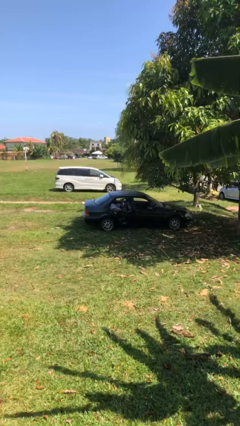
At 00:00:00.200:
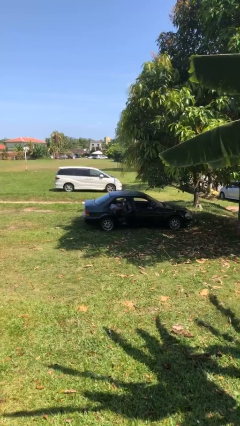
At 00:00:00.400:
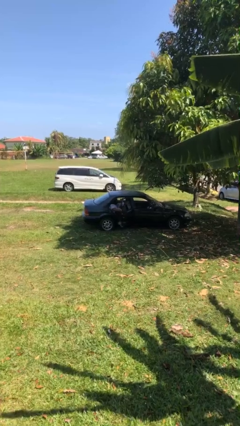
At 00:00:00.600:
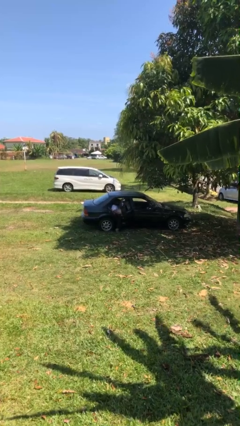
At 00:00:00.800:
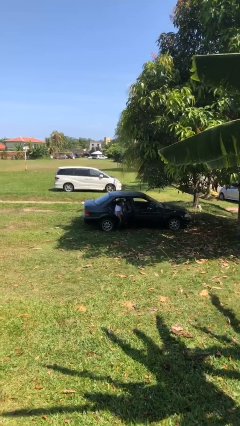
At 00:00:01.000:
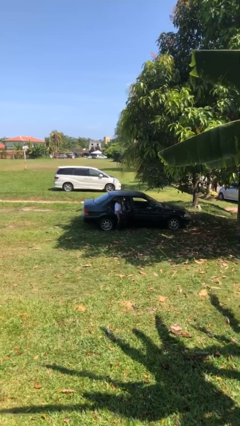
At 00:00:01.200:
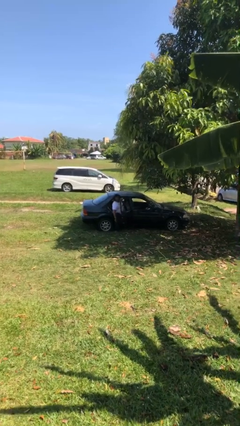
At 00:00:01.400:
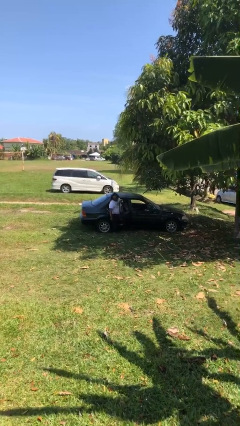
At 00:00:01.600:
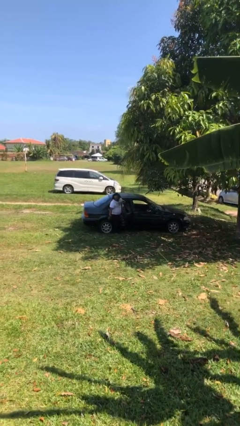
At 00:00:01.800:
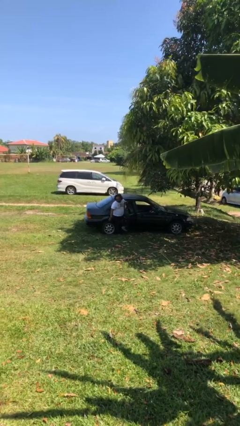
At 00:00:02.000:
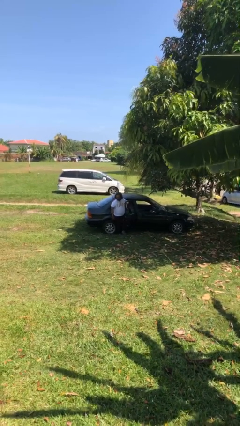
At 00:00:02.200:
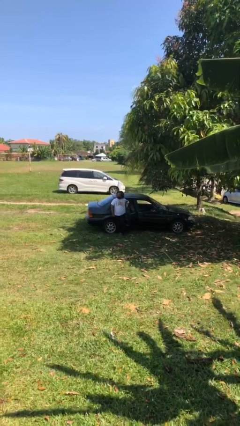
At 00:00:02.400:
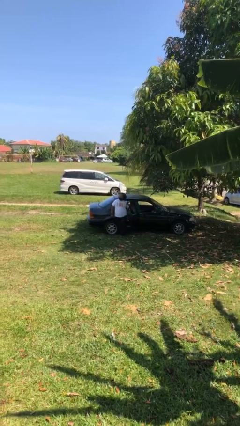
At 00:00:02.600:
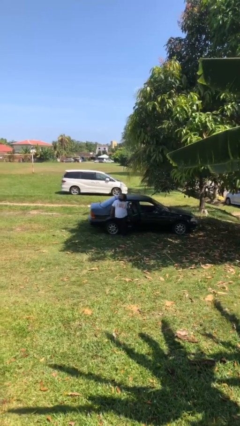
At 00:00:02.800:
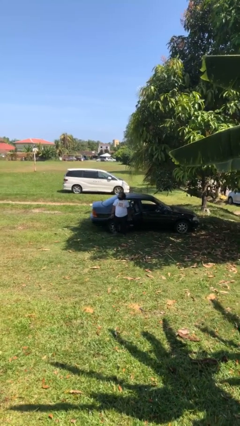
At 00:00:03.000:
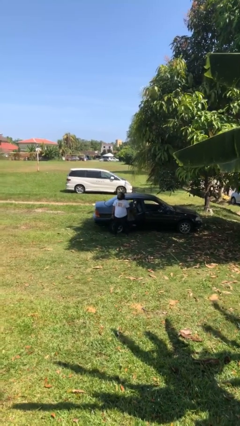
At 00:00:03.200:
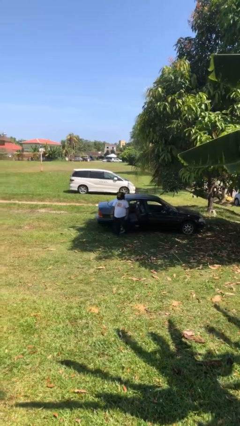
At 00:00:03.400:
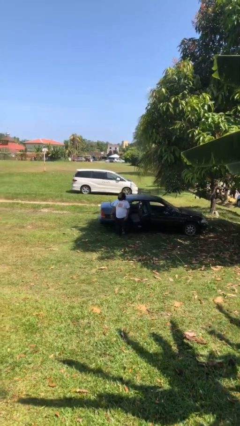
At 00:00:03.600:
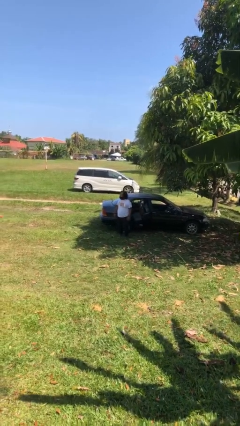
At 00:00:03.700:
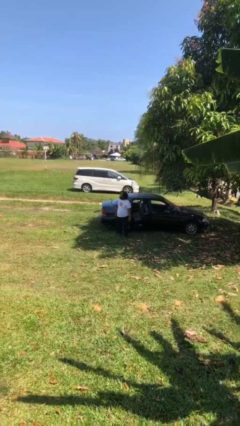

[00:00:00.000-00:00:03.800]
person exits car

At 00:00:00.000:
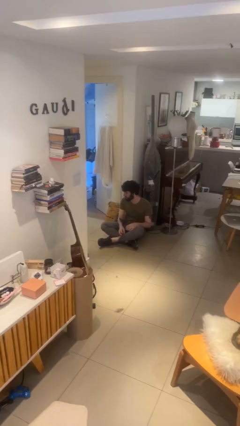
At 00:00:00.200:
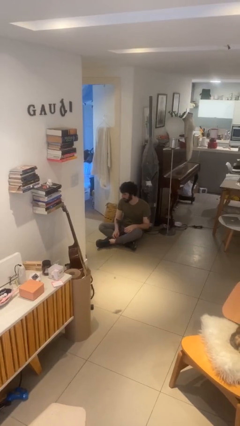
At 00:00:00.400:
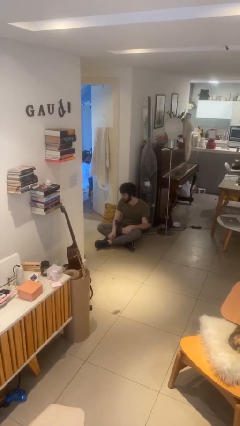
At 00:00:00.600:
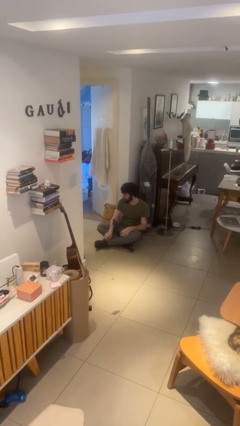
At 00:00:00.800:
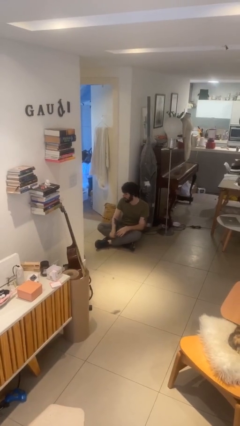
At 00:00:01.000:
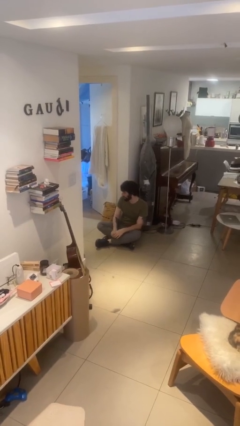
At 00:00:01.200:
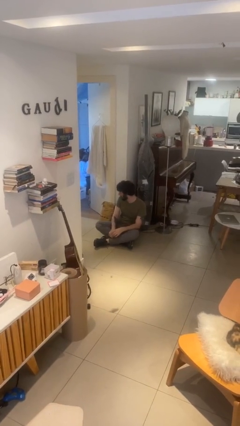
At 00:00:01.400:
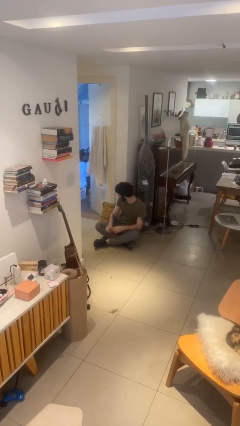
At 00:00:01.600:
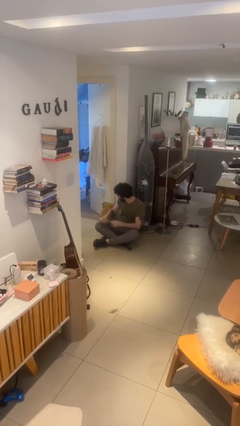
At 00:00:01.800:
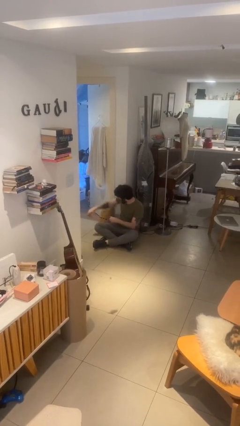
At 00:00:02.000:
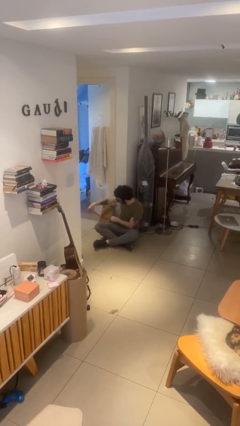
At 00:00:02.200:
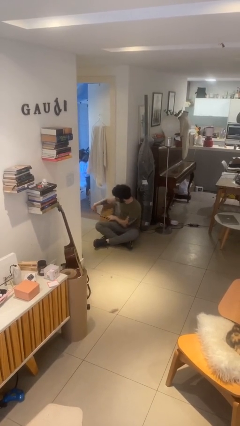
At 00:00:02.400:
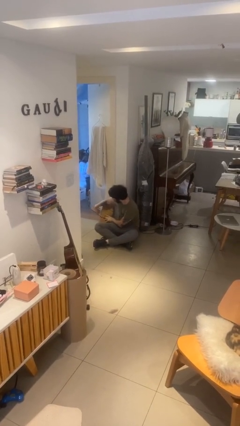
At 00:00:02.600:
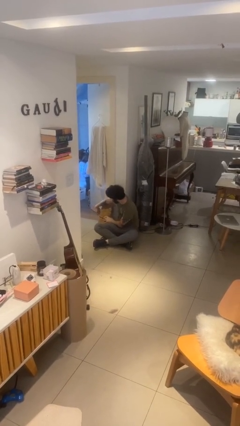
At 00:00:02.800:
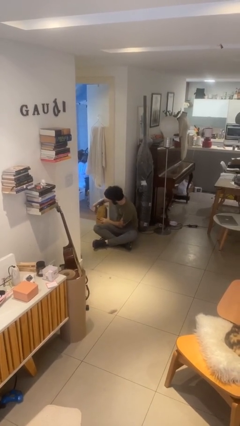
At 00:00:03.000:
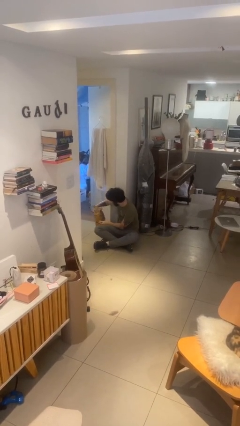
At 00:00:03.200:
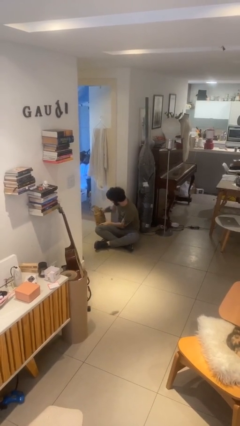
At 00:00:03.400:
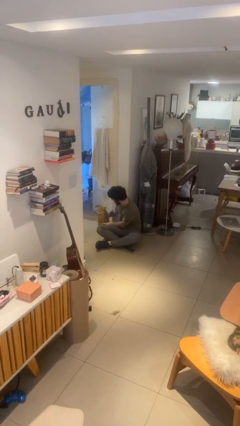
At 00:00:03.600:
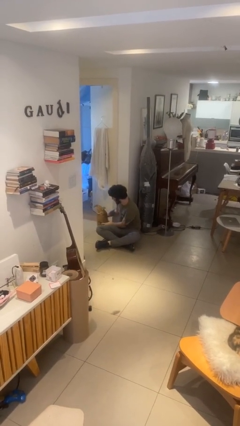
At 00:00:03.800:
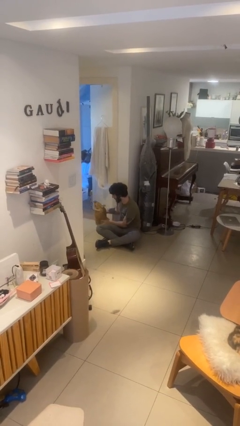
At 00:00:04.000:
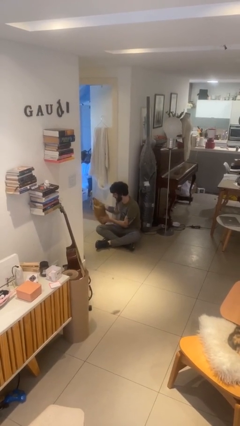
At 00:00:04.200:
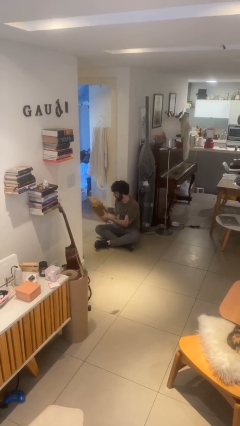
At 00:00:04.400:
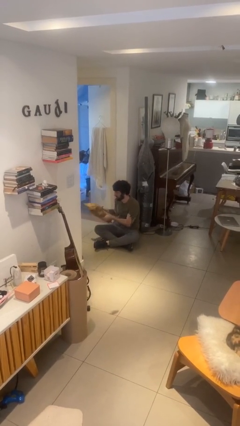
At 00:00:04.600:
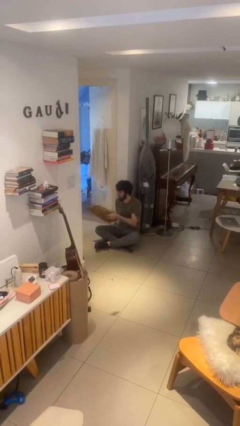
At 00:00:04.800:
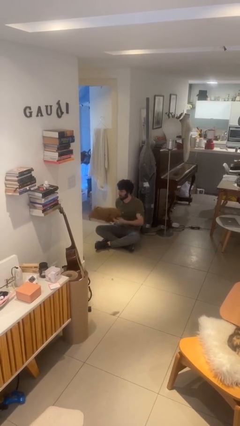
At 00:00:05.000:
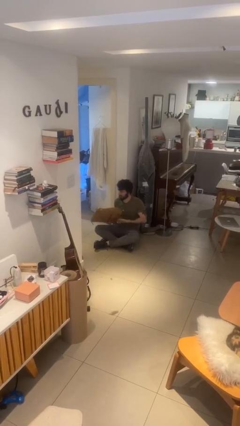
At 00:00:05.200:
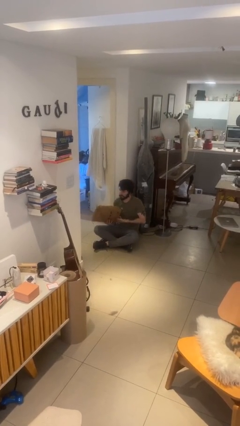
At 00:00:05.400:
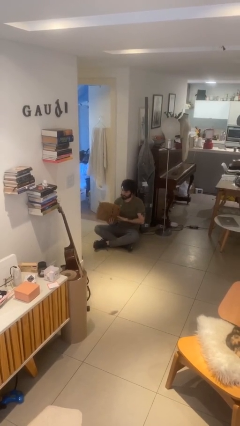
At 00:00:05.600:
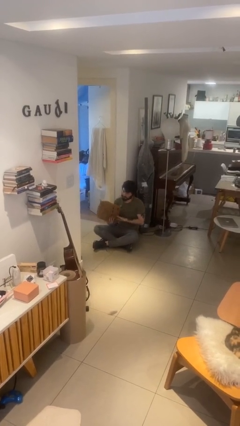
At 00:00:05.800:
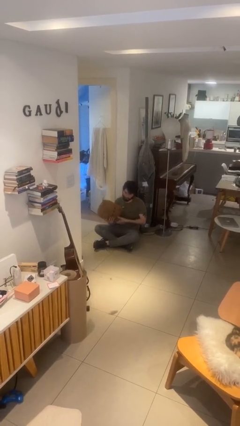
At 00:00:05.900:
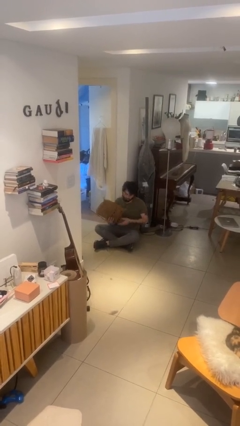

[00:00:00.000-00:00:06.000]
person picks up object from floor

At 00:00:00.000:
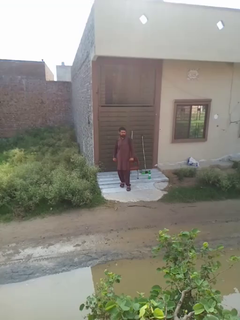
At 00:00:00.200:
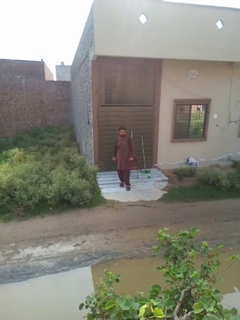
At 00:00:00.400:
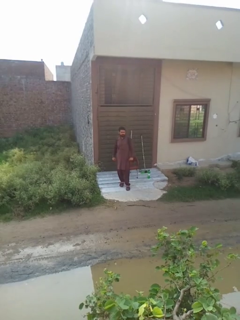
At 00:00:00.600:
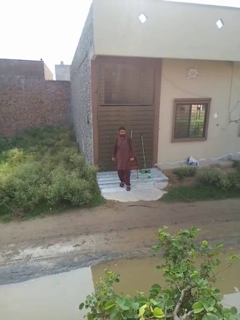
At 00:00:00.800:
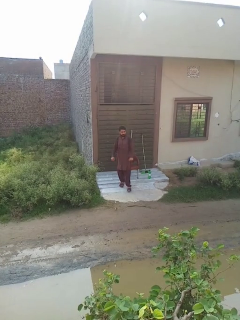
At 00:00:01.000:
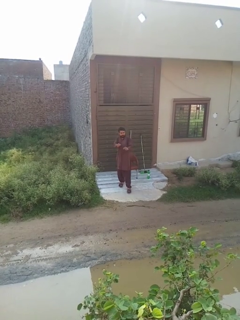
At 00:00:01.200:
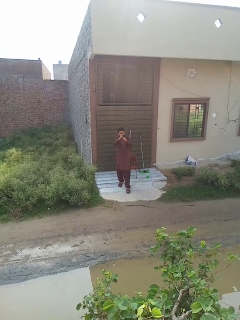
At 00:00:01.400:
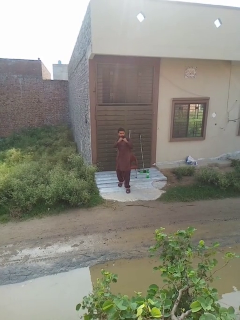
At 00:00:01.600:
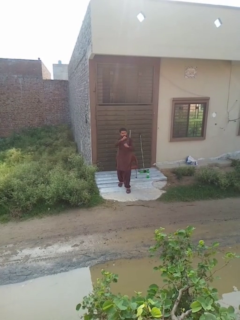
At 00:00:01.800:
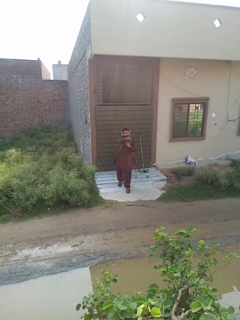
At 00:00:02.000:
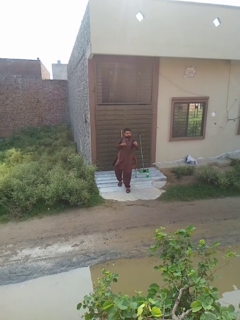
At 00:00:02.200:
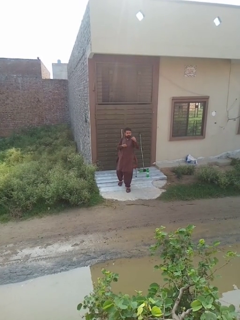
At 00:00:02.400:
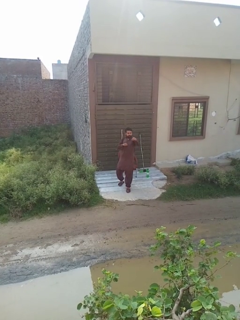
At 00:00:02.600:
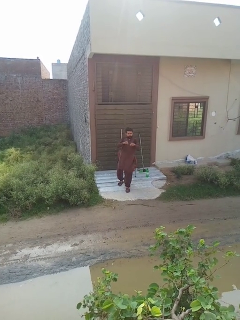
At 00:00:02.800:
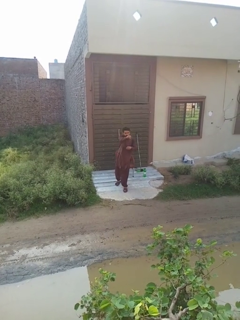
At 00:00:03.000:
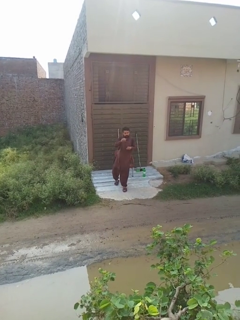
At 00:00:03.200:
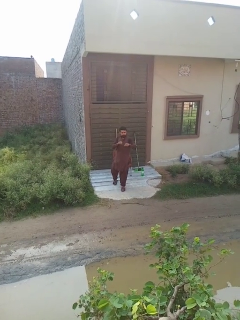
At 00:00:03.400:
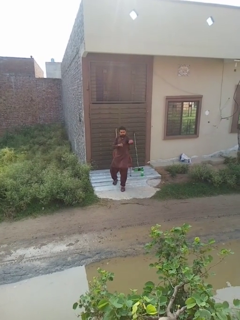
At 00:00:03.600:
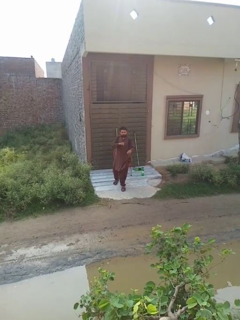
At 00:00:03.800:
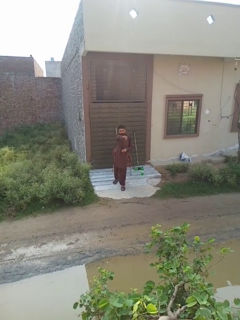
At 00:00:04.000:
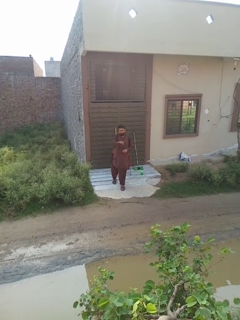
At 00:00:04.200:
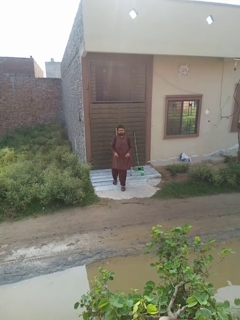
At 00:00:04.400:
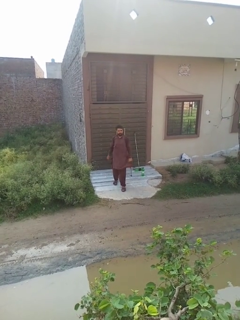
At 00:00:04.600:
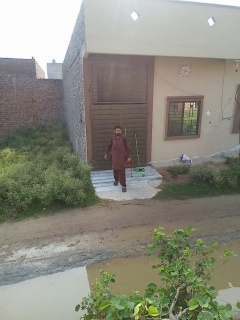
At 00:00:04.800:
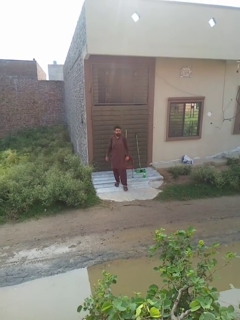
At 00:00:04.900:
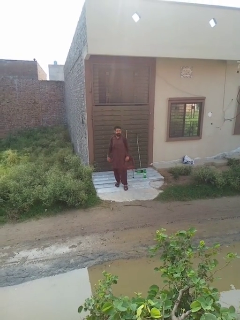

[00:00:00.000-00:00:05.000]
person punches

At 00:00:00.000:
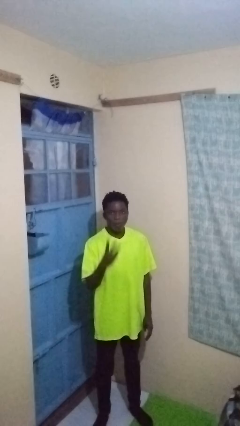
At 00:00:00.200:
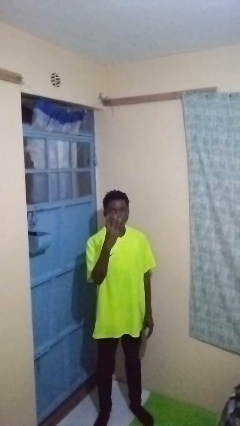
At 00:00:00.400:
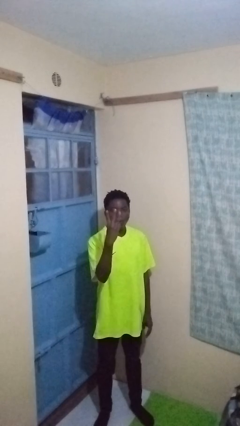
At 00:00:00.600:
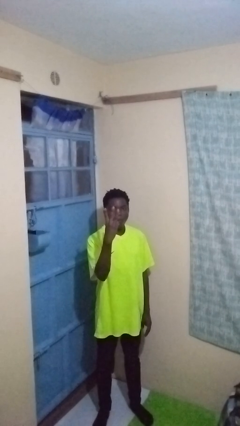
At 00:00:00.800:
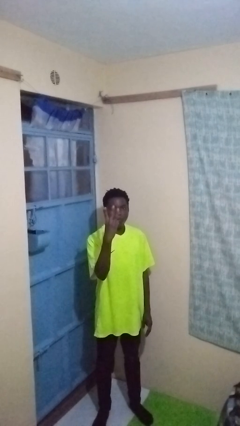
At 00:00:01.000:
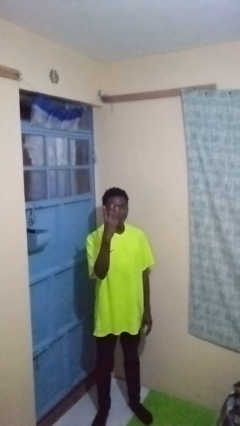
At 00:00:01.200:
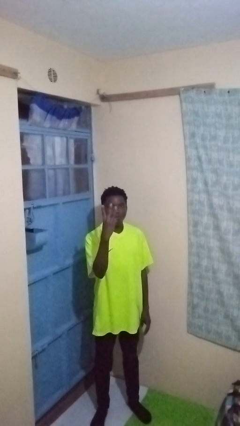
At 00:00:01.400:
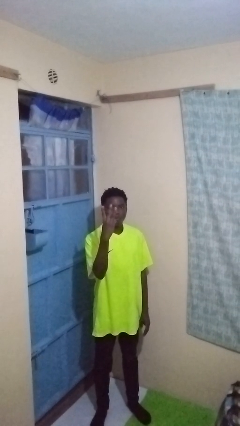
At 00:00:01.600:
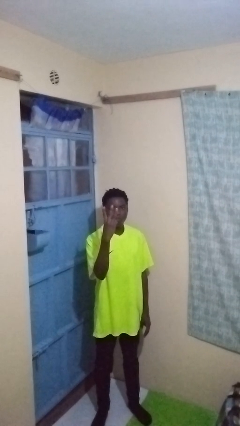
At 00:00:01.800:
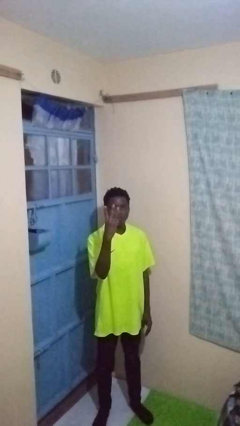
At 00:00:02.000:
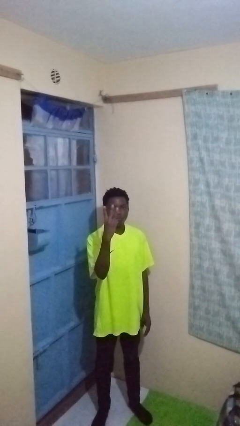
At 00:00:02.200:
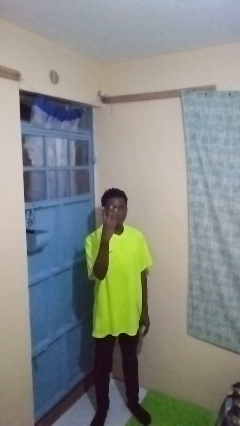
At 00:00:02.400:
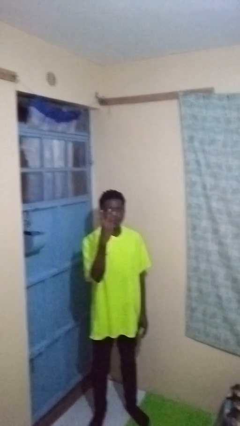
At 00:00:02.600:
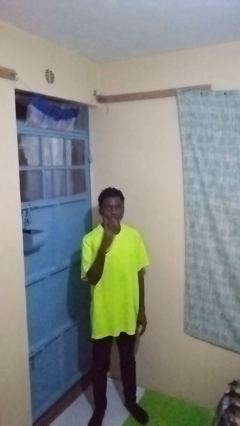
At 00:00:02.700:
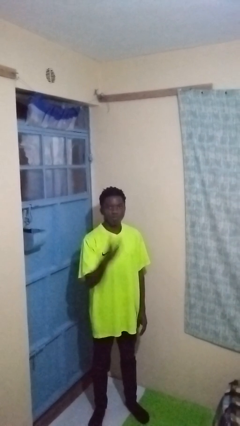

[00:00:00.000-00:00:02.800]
person gestures number three

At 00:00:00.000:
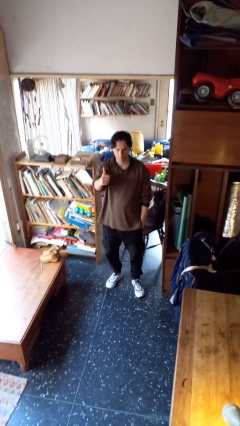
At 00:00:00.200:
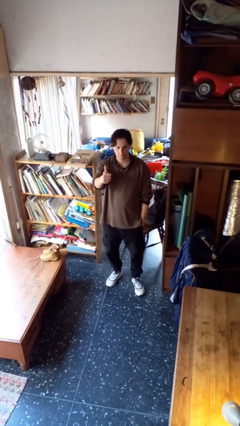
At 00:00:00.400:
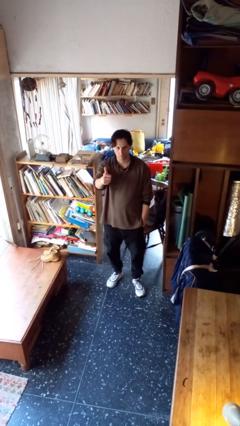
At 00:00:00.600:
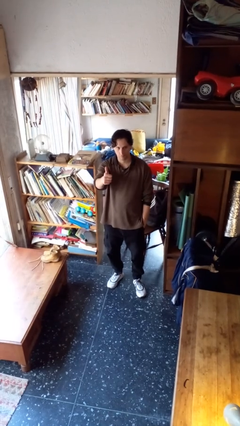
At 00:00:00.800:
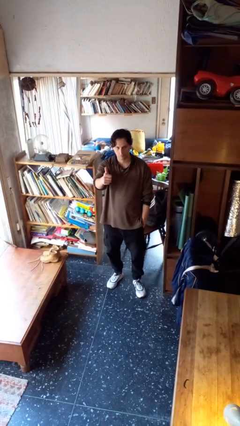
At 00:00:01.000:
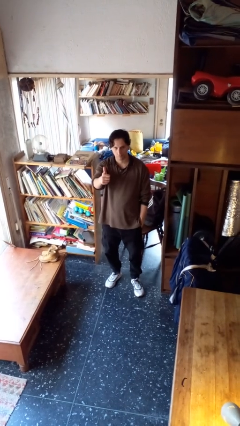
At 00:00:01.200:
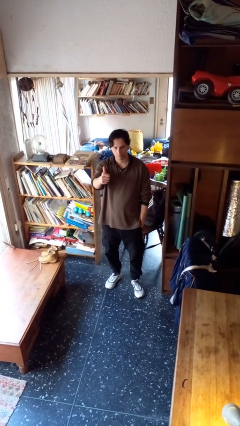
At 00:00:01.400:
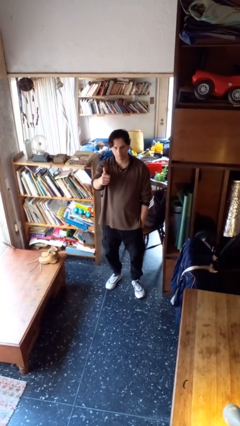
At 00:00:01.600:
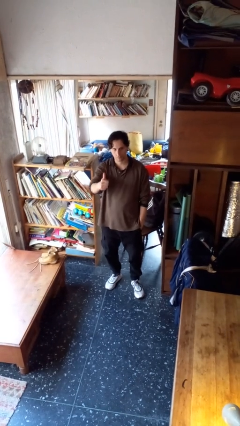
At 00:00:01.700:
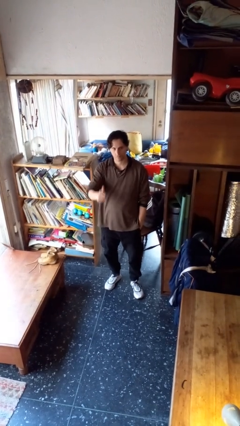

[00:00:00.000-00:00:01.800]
person gestures thumbs up
